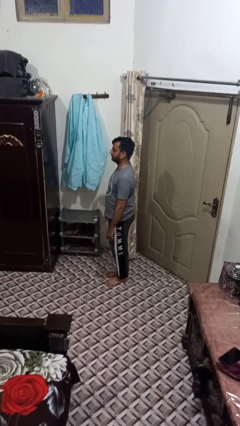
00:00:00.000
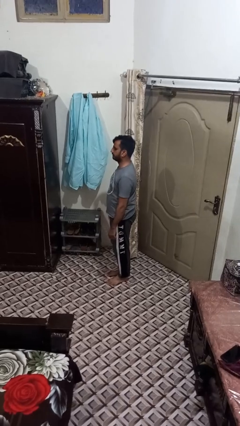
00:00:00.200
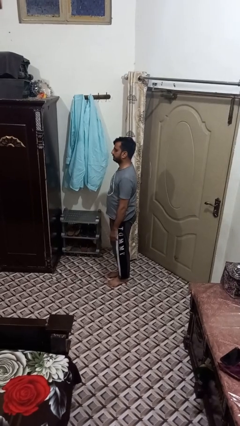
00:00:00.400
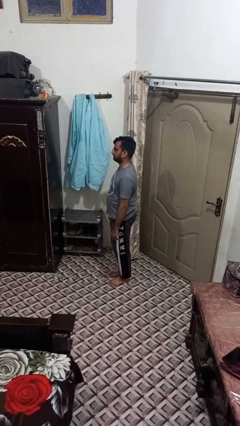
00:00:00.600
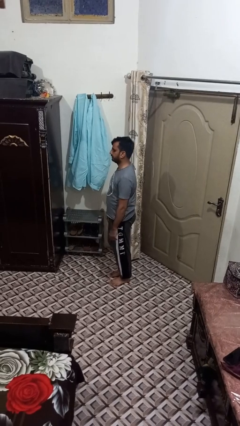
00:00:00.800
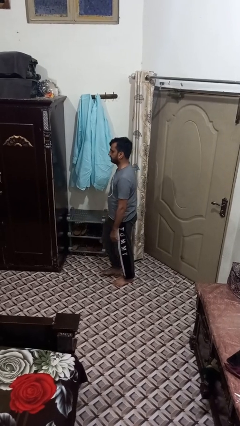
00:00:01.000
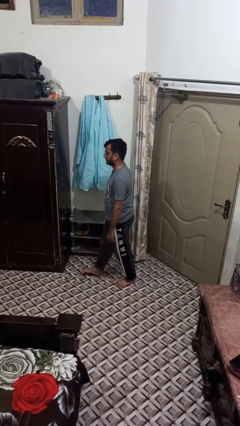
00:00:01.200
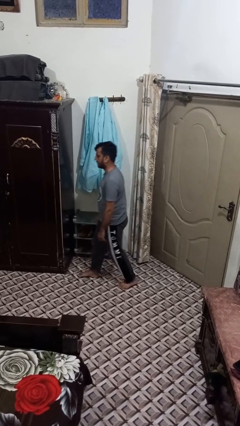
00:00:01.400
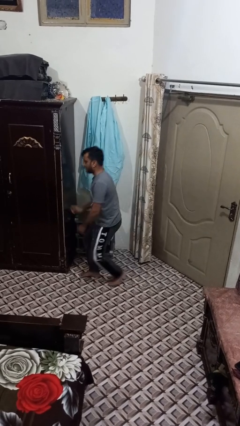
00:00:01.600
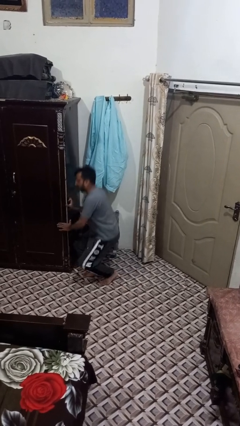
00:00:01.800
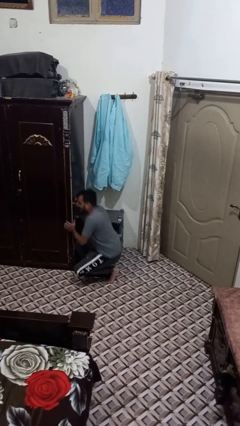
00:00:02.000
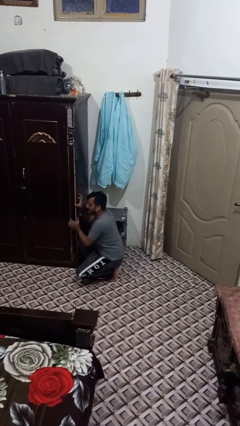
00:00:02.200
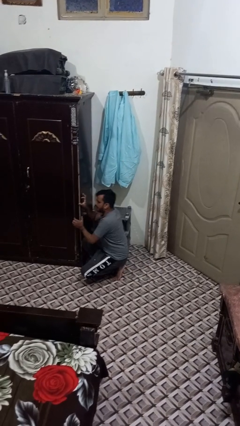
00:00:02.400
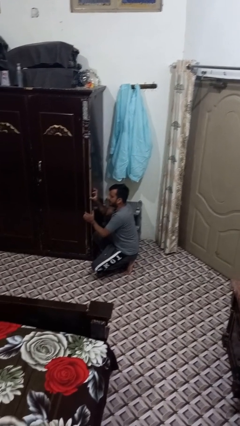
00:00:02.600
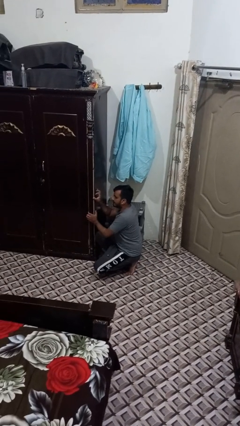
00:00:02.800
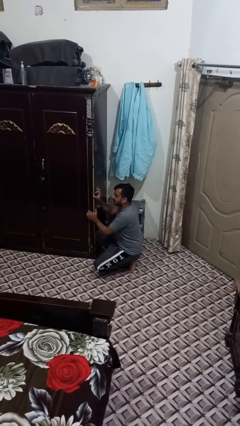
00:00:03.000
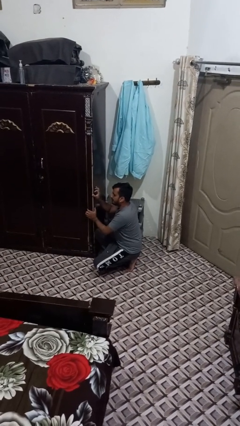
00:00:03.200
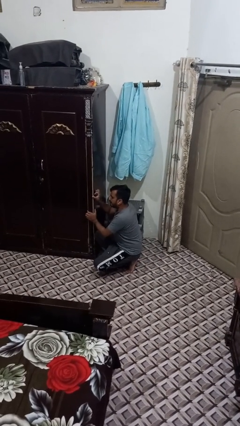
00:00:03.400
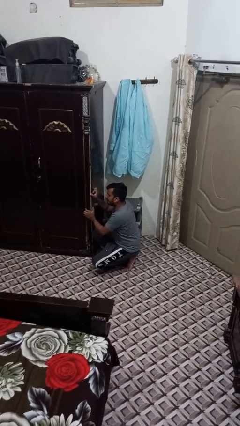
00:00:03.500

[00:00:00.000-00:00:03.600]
person trips on object on floor

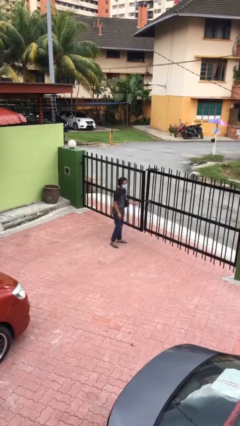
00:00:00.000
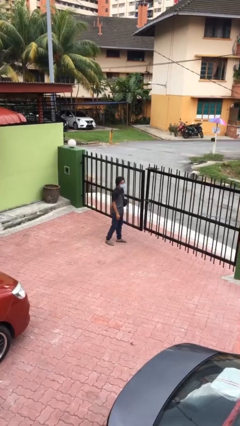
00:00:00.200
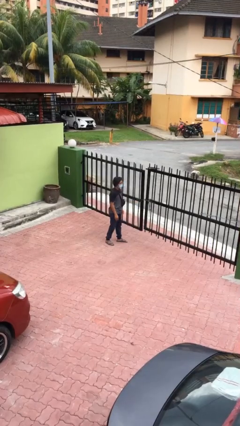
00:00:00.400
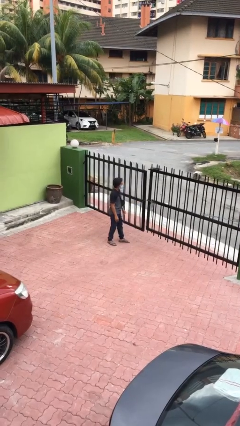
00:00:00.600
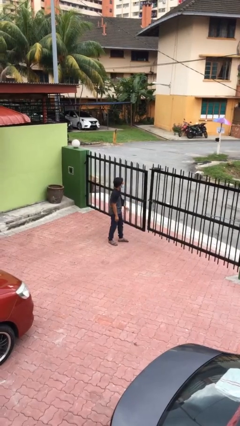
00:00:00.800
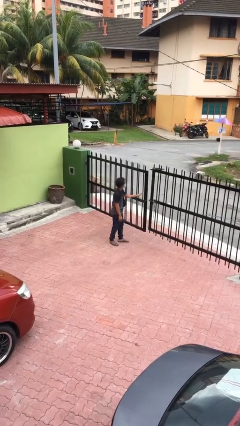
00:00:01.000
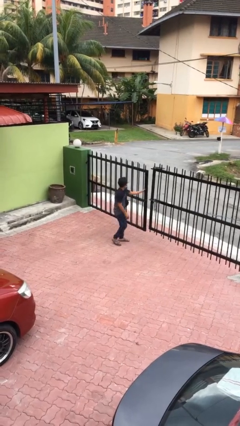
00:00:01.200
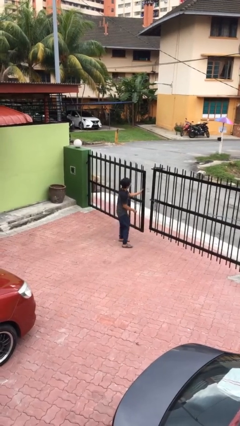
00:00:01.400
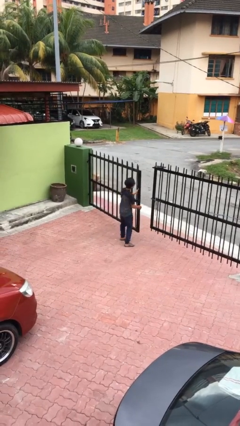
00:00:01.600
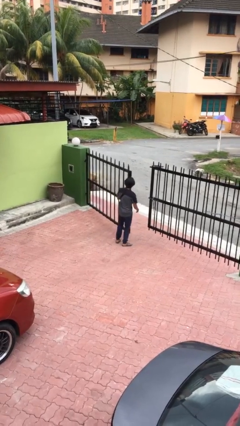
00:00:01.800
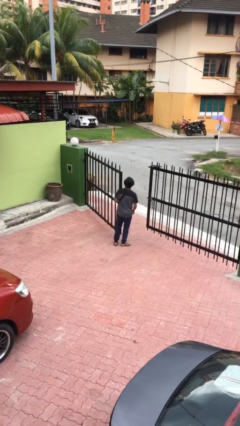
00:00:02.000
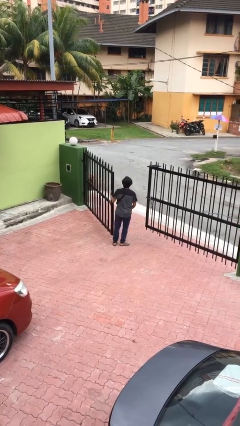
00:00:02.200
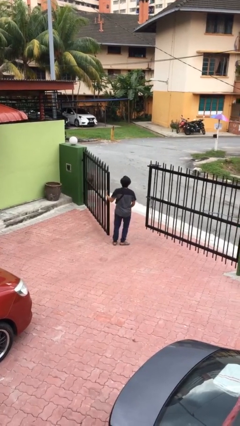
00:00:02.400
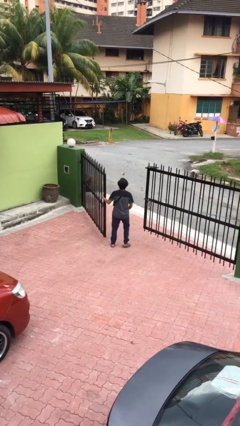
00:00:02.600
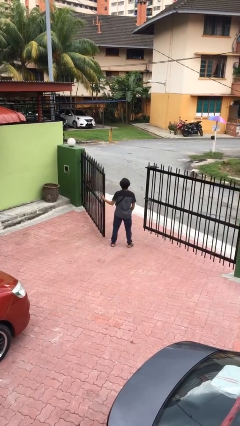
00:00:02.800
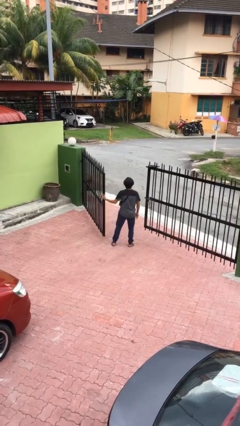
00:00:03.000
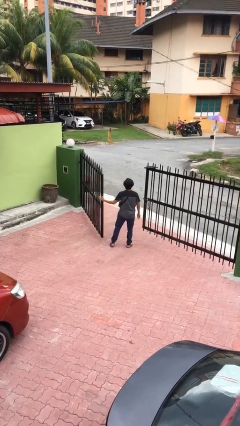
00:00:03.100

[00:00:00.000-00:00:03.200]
person opens facility door

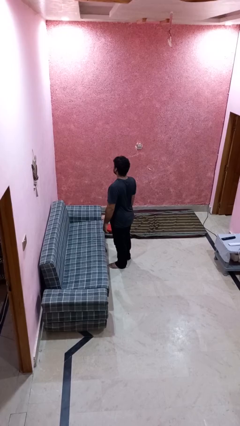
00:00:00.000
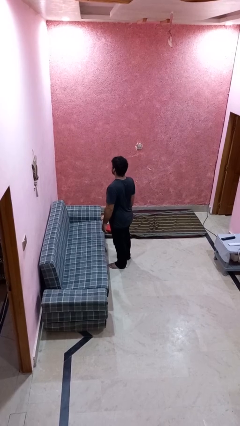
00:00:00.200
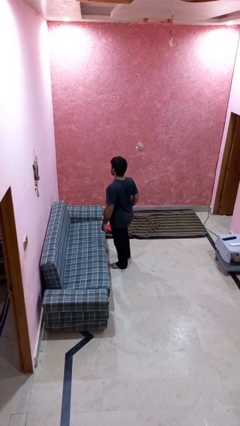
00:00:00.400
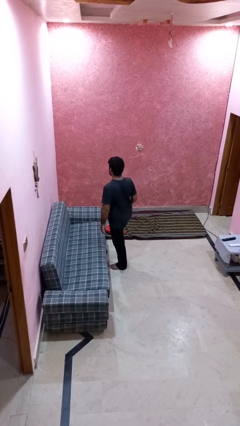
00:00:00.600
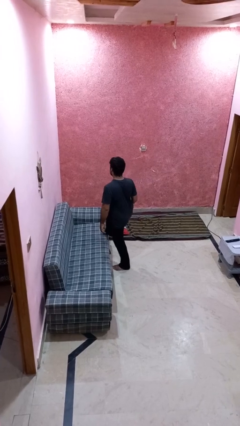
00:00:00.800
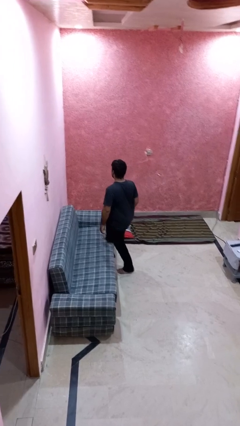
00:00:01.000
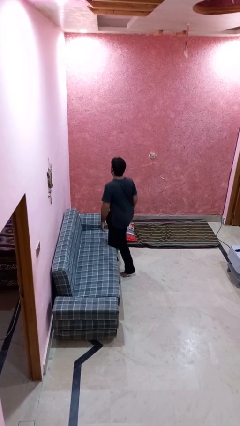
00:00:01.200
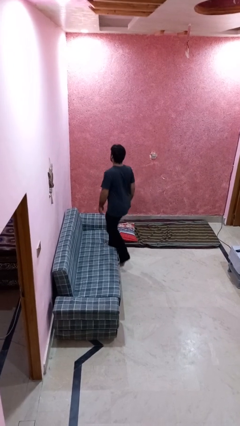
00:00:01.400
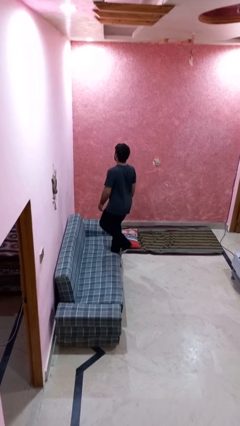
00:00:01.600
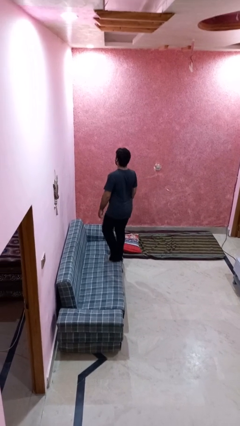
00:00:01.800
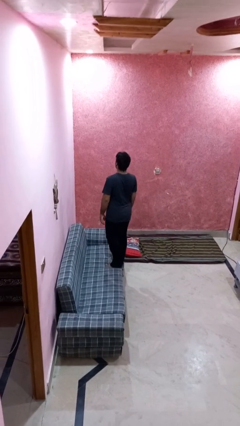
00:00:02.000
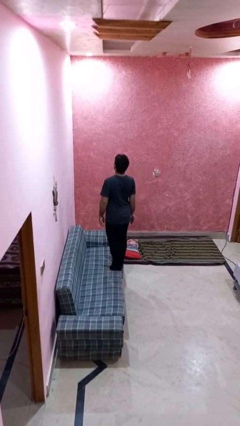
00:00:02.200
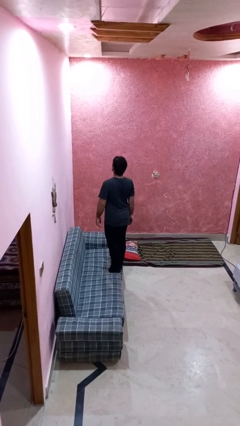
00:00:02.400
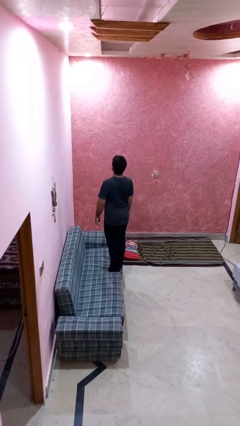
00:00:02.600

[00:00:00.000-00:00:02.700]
person climbs on couch

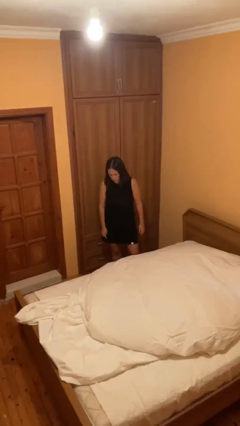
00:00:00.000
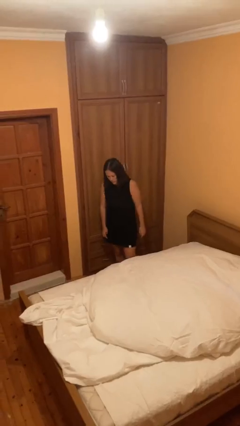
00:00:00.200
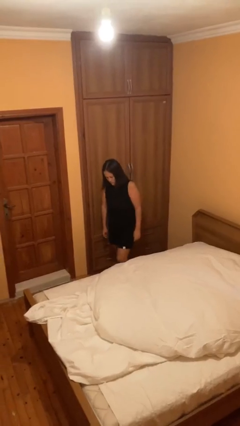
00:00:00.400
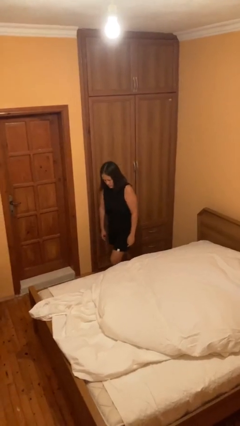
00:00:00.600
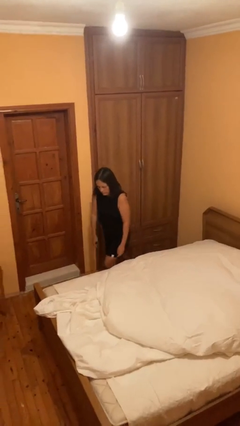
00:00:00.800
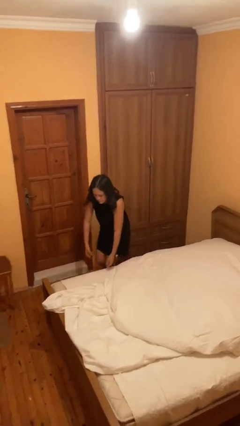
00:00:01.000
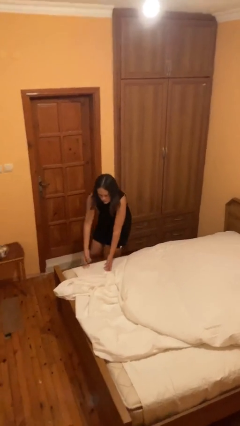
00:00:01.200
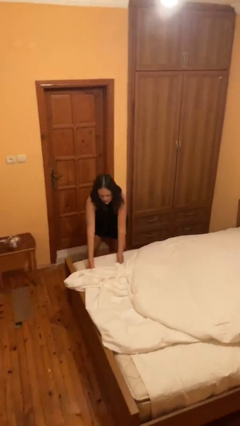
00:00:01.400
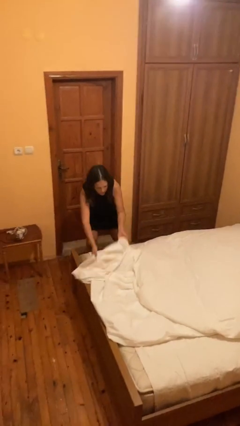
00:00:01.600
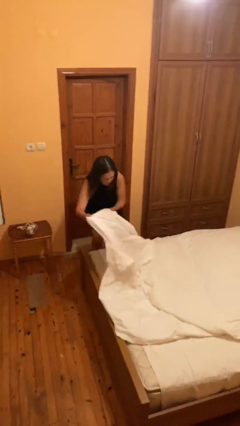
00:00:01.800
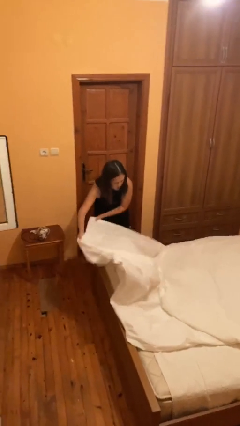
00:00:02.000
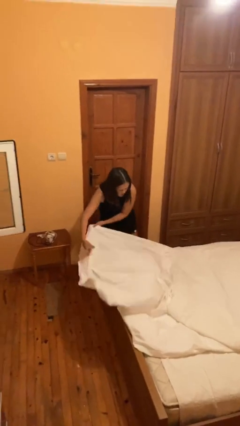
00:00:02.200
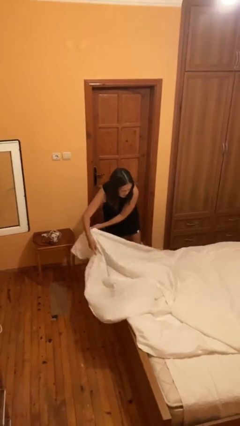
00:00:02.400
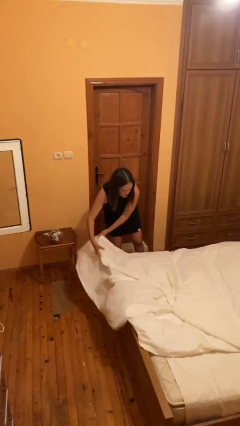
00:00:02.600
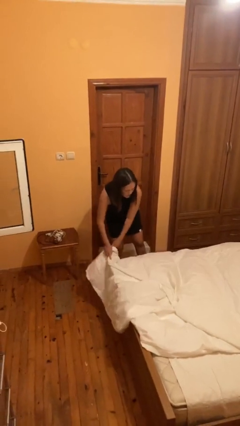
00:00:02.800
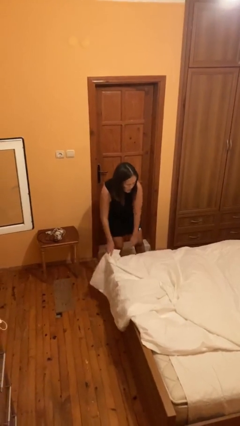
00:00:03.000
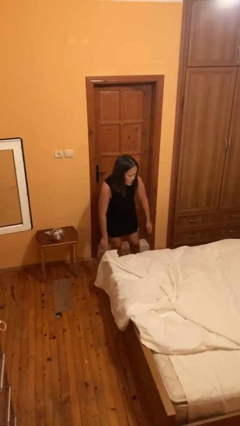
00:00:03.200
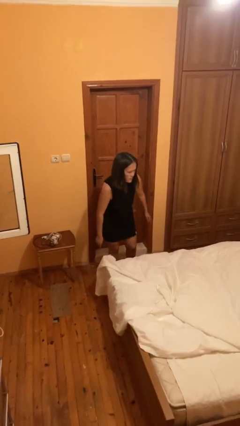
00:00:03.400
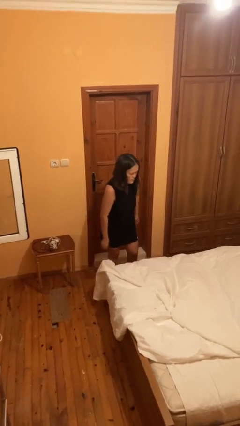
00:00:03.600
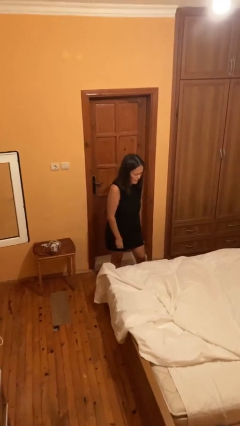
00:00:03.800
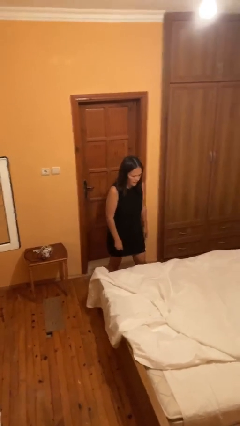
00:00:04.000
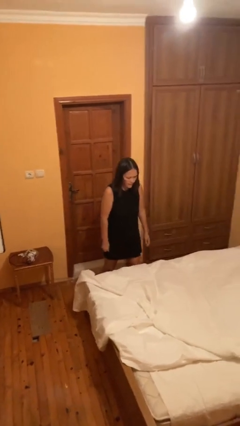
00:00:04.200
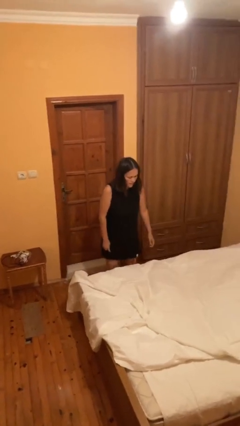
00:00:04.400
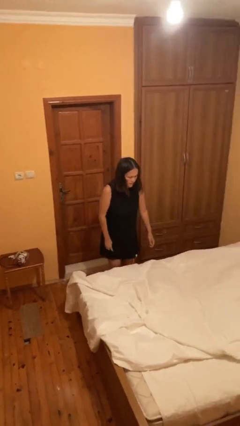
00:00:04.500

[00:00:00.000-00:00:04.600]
person makes bed

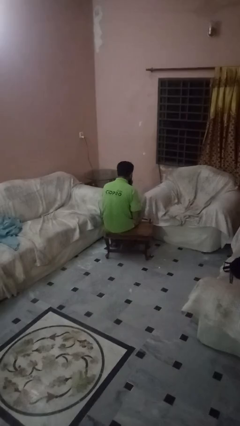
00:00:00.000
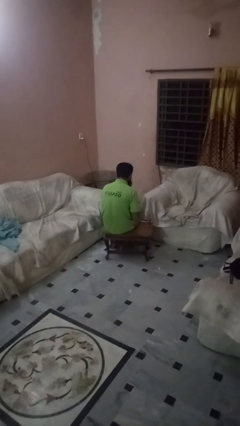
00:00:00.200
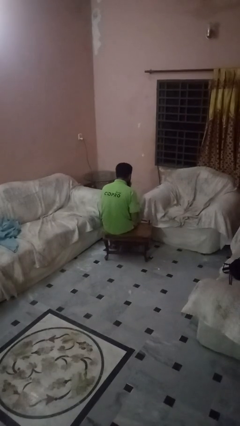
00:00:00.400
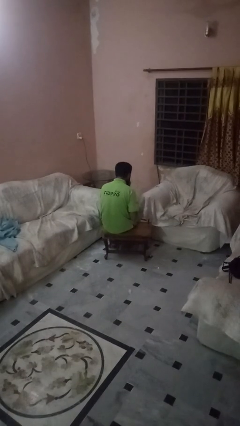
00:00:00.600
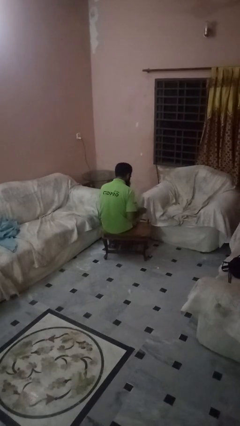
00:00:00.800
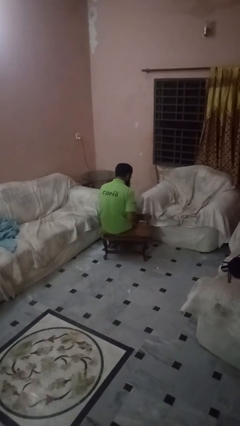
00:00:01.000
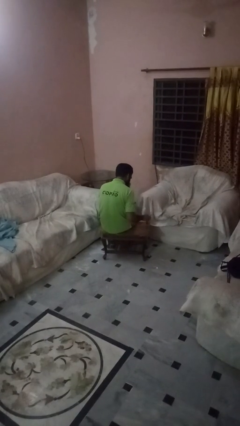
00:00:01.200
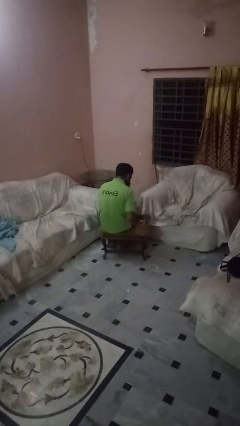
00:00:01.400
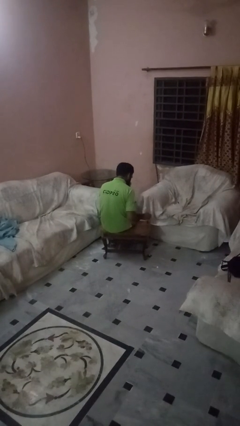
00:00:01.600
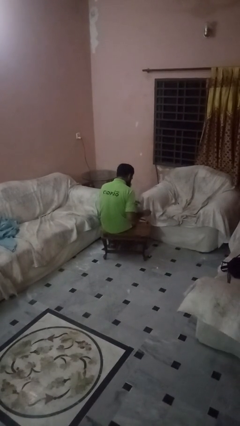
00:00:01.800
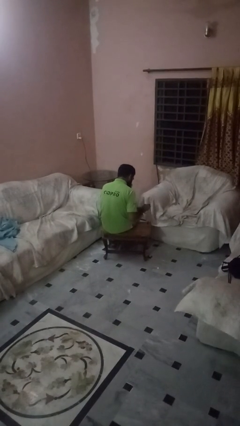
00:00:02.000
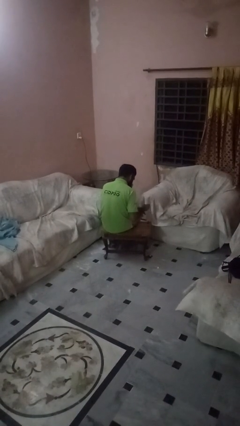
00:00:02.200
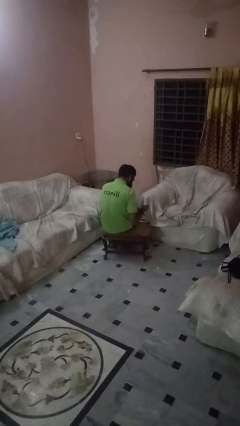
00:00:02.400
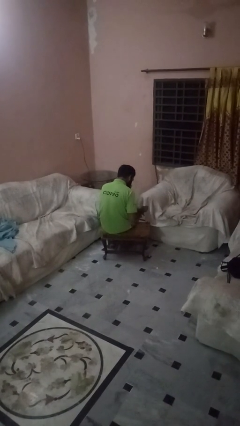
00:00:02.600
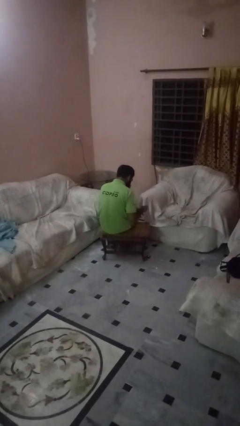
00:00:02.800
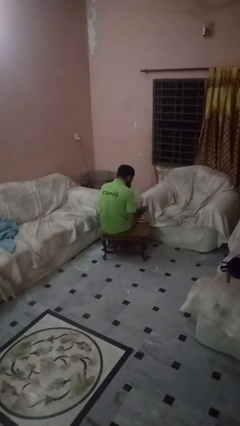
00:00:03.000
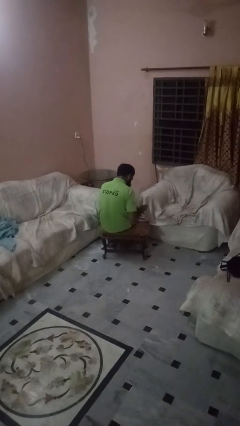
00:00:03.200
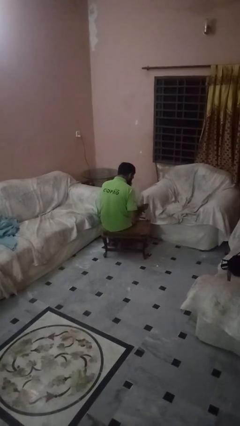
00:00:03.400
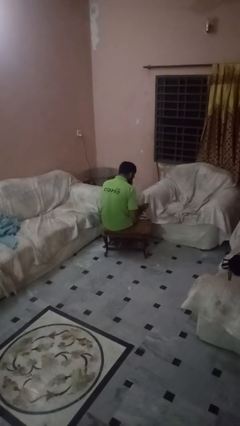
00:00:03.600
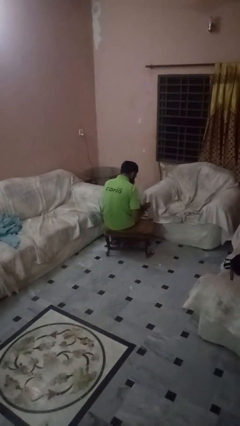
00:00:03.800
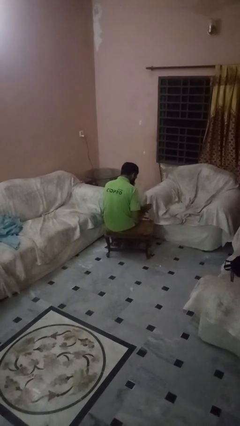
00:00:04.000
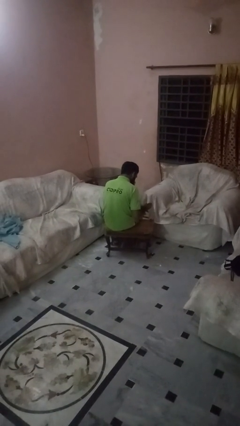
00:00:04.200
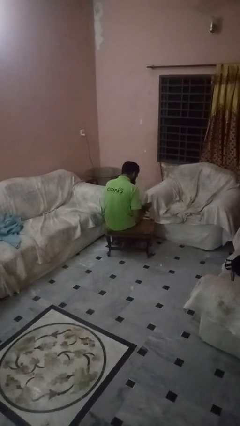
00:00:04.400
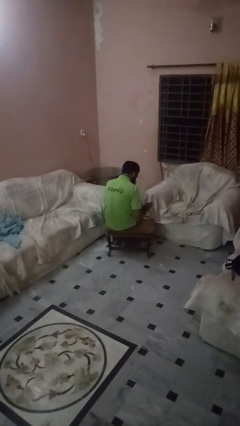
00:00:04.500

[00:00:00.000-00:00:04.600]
person paints fingernails
